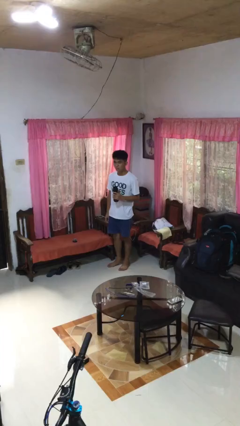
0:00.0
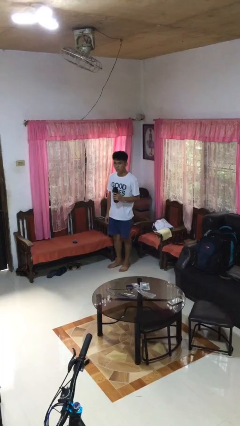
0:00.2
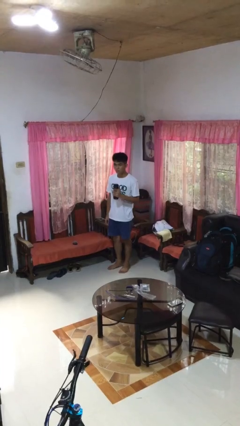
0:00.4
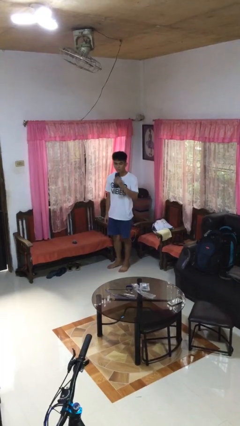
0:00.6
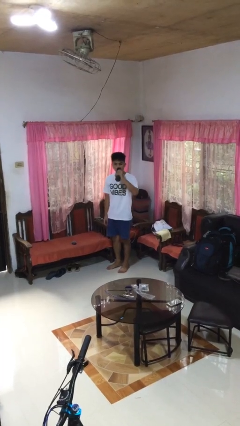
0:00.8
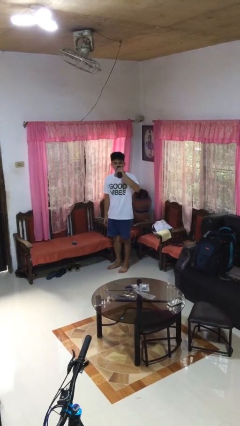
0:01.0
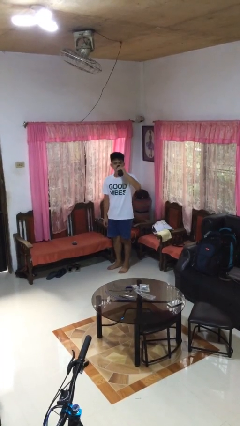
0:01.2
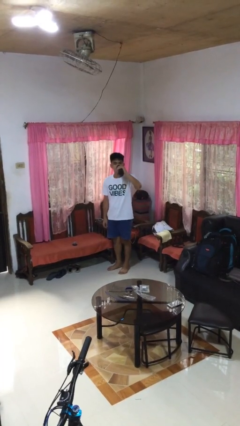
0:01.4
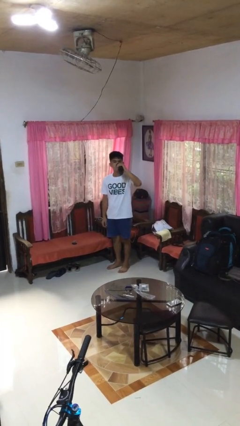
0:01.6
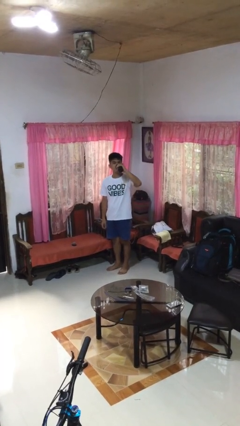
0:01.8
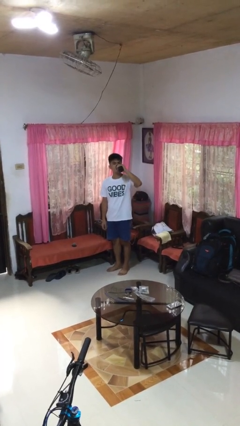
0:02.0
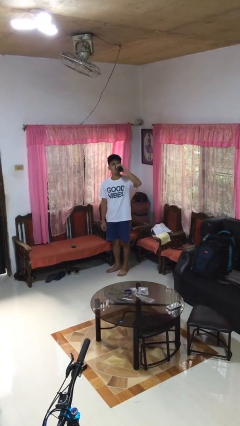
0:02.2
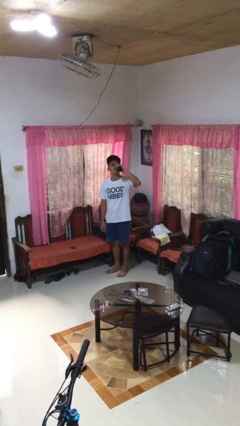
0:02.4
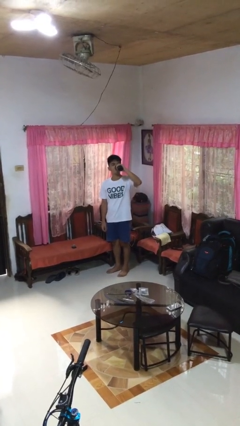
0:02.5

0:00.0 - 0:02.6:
person drinks from bottle

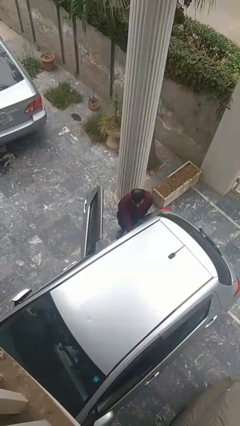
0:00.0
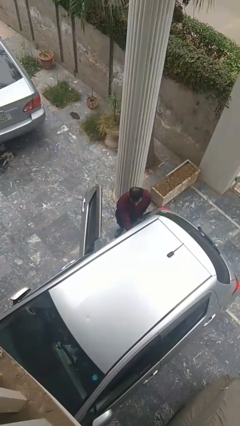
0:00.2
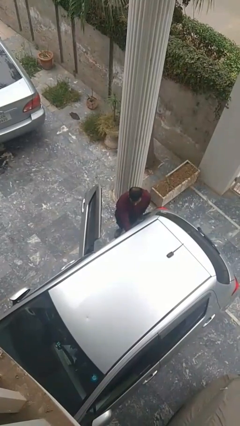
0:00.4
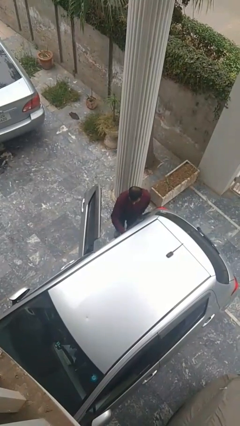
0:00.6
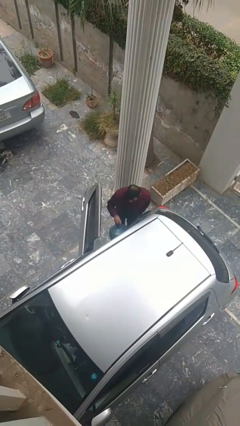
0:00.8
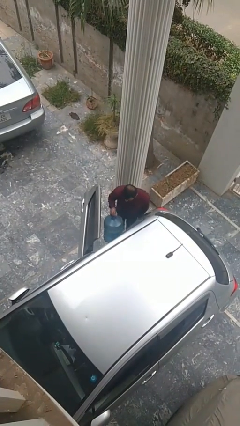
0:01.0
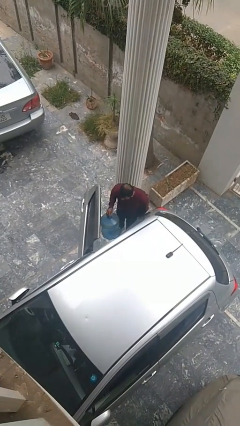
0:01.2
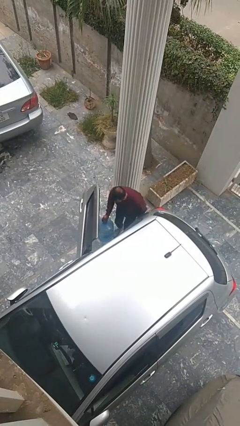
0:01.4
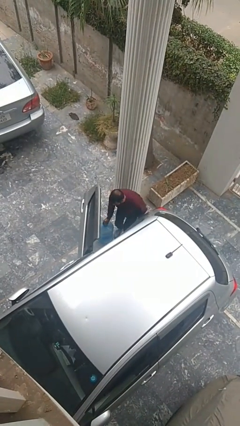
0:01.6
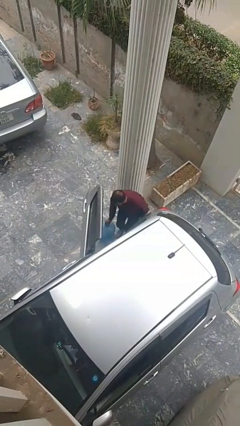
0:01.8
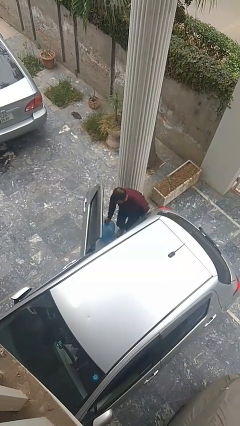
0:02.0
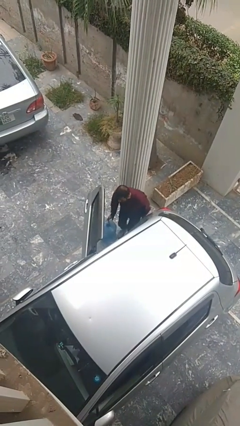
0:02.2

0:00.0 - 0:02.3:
person unloads car

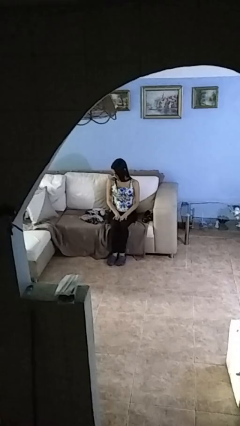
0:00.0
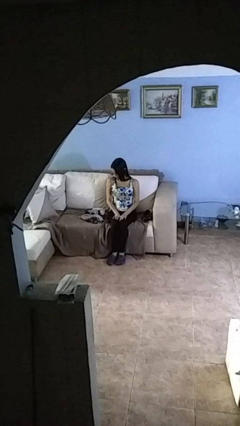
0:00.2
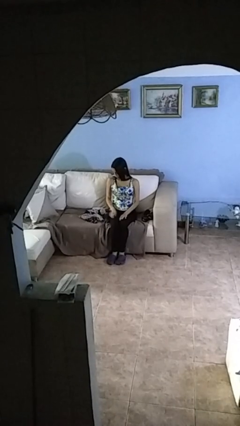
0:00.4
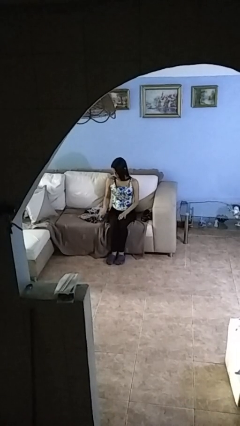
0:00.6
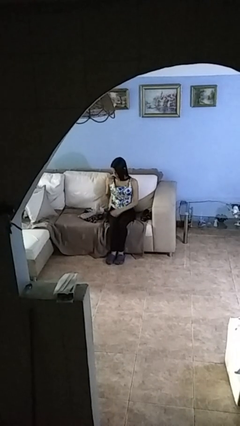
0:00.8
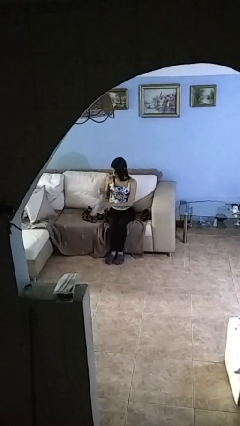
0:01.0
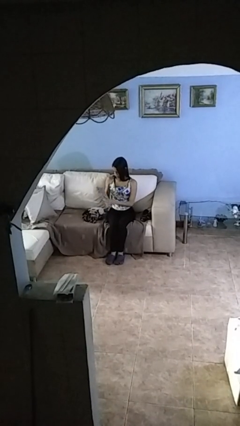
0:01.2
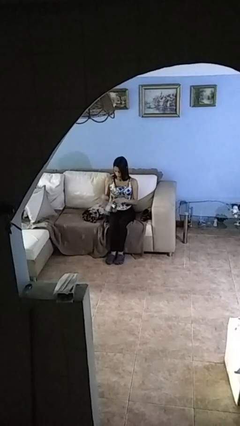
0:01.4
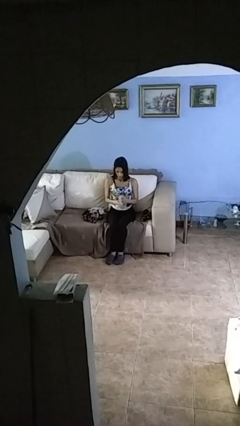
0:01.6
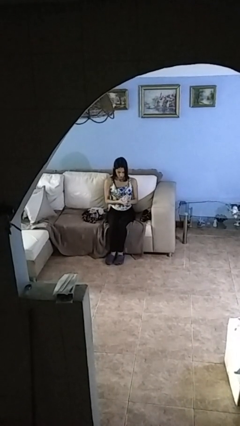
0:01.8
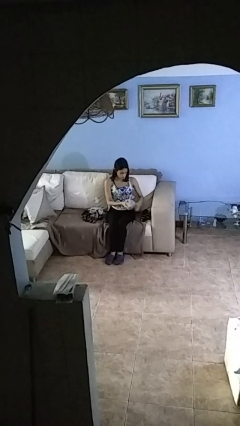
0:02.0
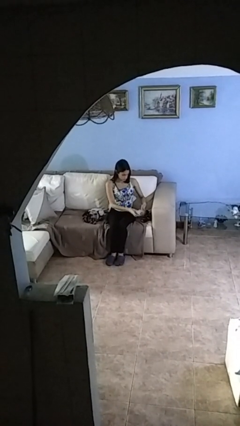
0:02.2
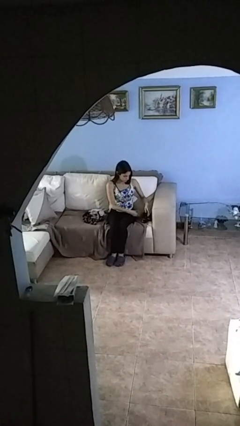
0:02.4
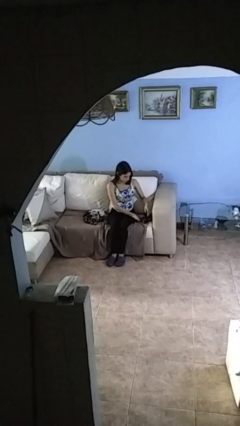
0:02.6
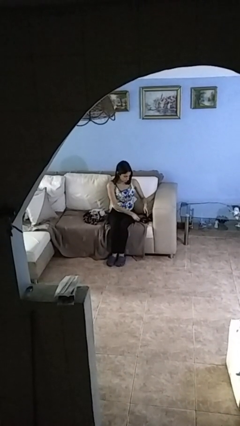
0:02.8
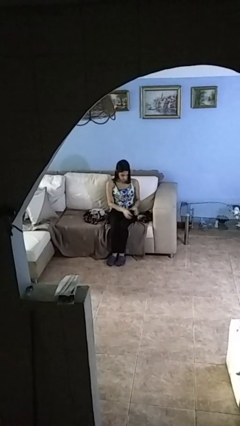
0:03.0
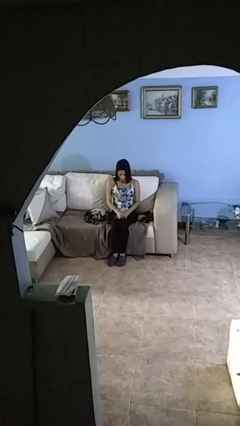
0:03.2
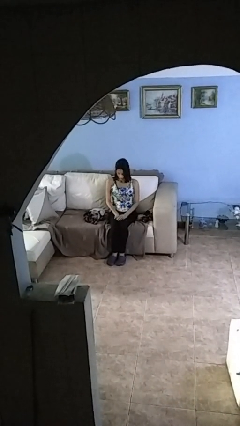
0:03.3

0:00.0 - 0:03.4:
person folds socks

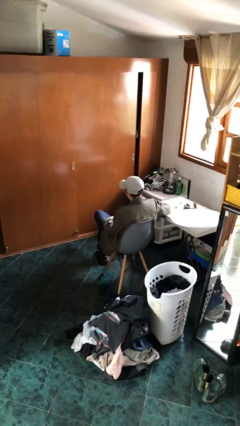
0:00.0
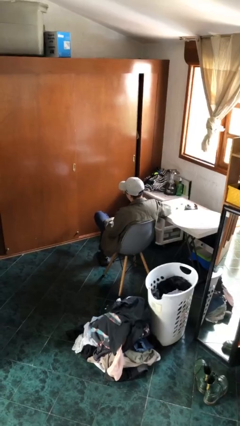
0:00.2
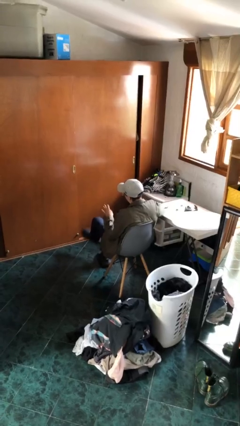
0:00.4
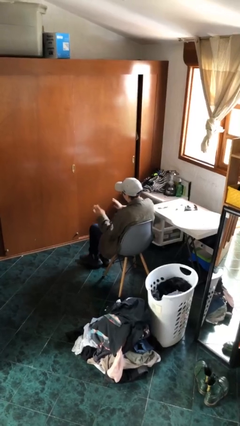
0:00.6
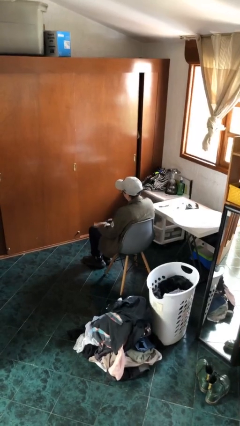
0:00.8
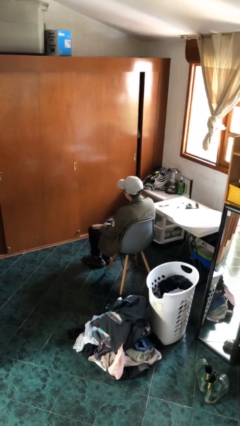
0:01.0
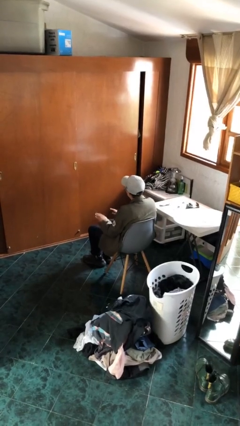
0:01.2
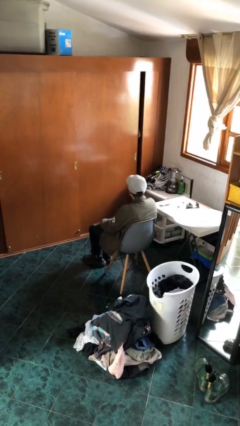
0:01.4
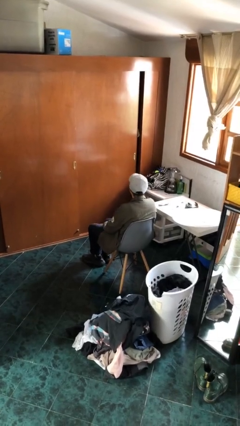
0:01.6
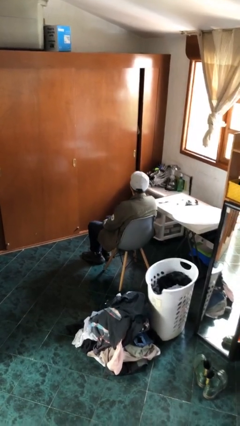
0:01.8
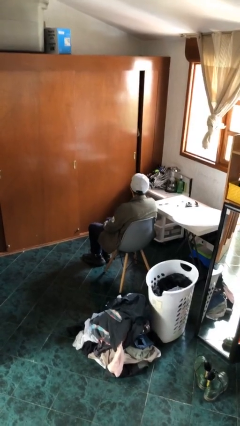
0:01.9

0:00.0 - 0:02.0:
person slaps hands on thighs

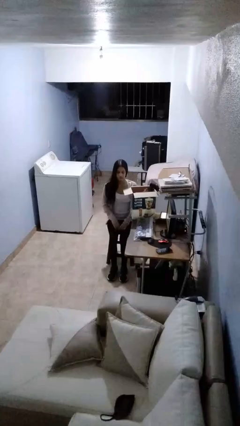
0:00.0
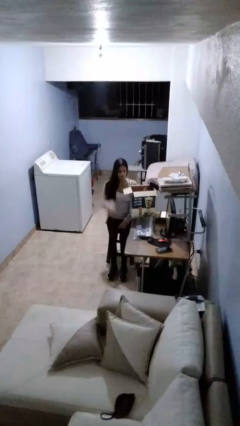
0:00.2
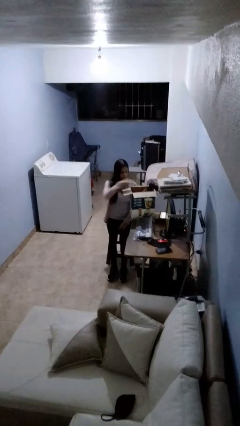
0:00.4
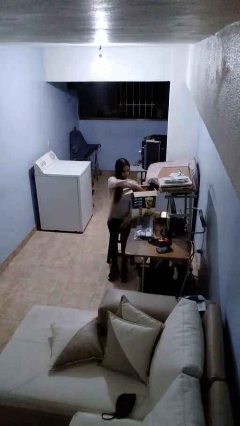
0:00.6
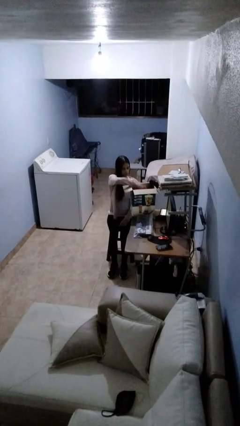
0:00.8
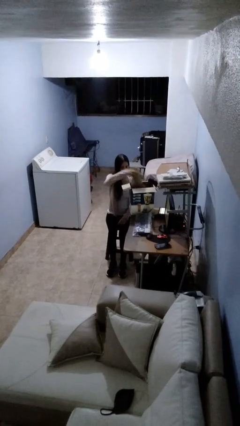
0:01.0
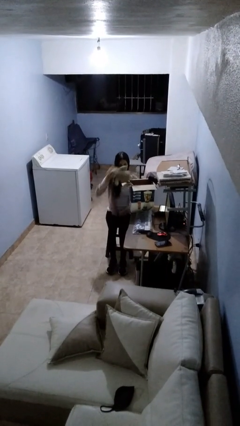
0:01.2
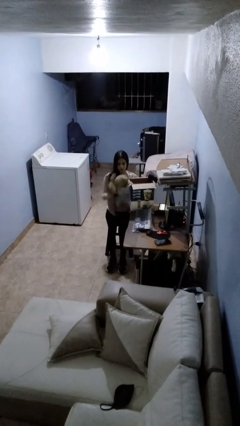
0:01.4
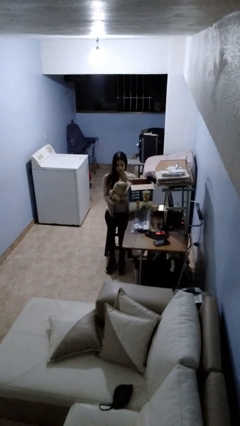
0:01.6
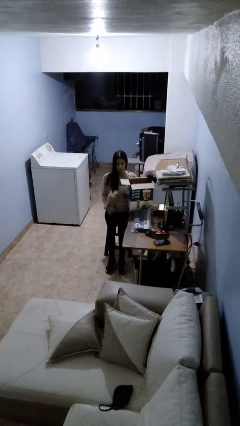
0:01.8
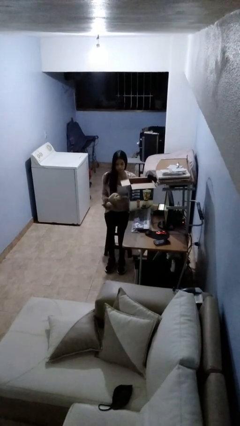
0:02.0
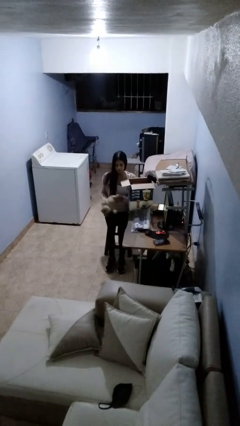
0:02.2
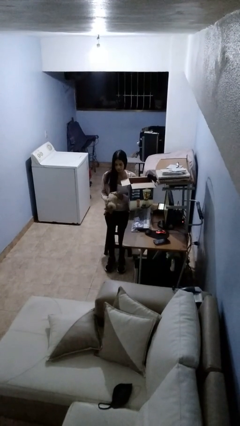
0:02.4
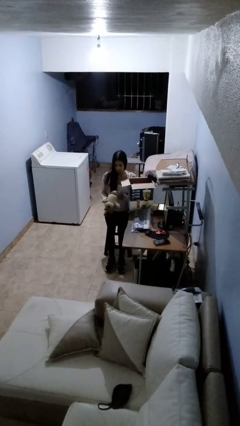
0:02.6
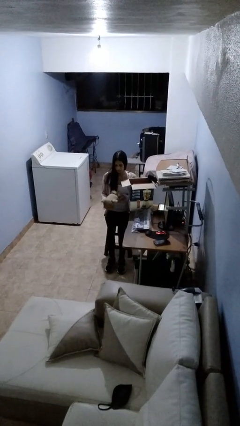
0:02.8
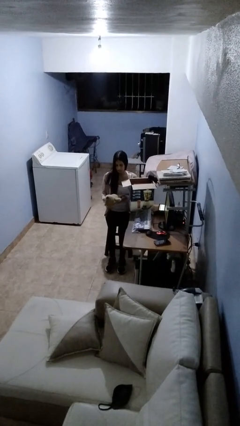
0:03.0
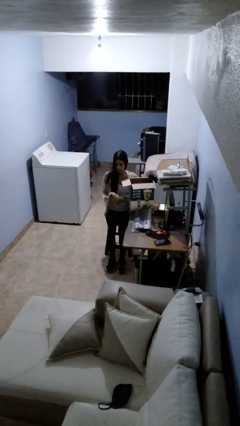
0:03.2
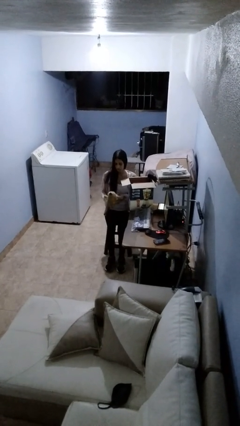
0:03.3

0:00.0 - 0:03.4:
person takes object from box

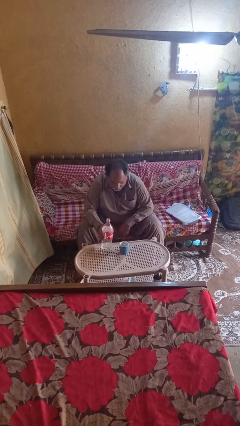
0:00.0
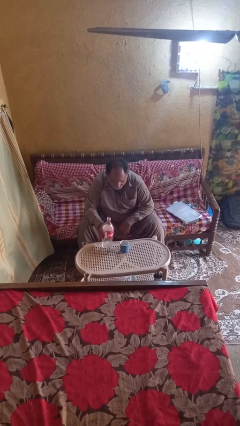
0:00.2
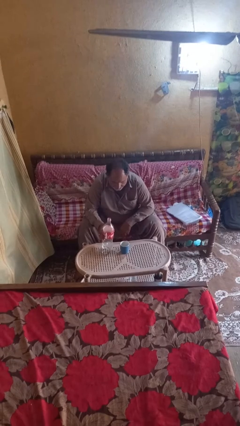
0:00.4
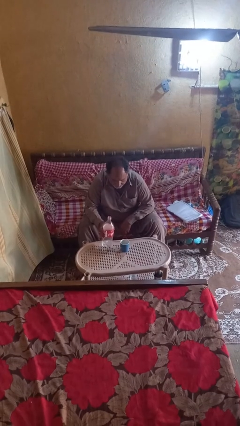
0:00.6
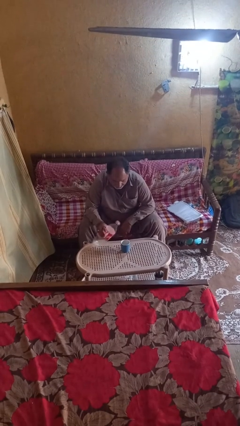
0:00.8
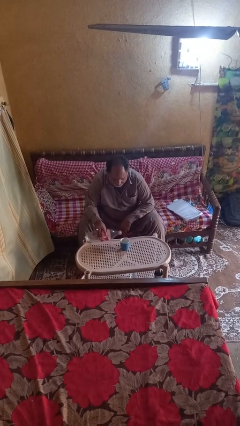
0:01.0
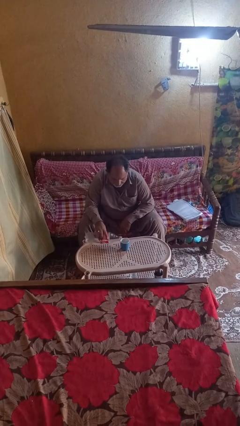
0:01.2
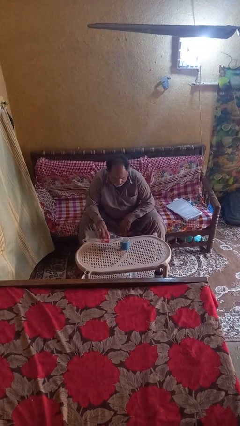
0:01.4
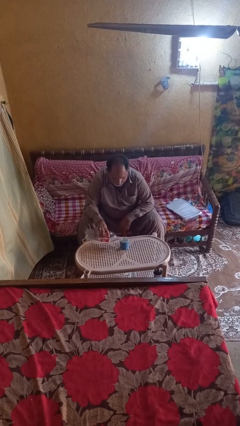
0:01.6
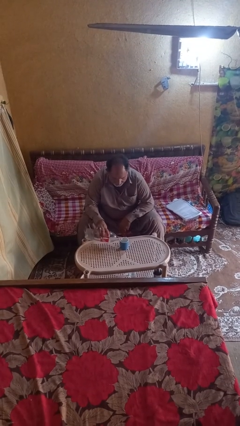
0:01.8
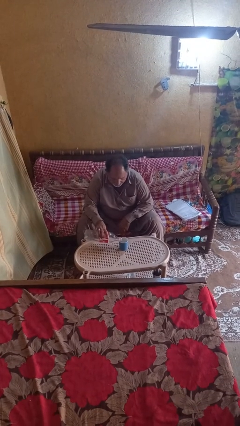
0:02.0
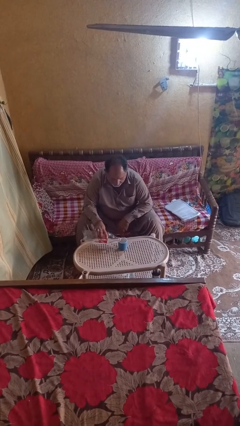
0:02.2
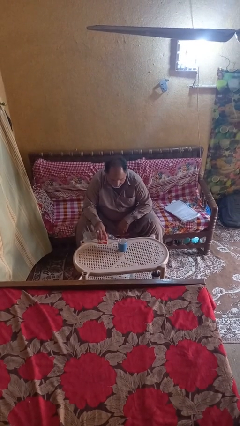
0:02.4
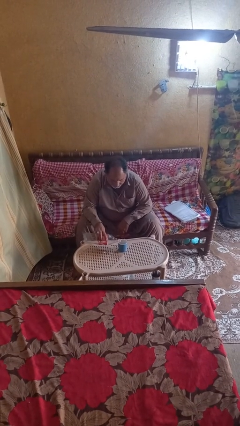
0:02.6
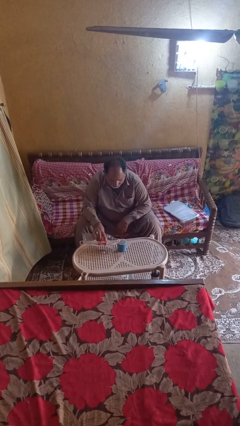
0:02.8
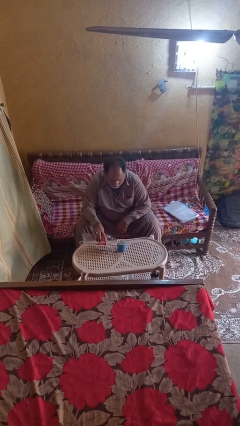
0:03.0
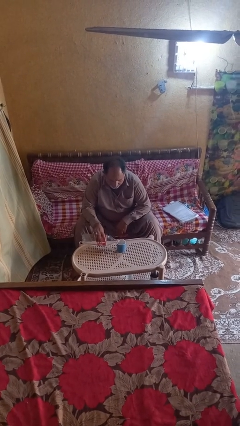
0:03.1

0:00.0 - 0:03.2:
person pours liquid into cup

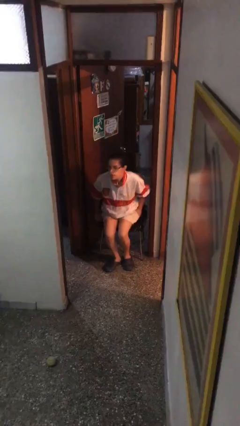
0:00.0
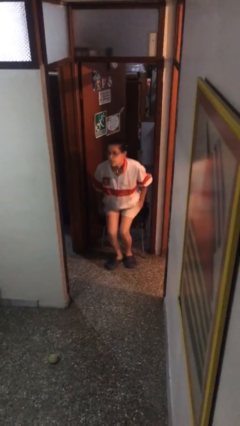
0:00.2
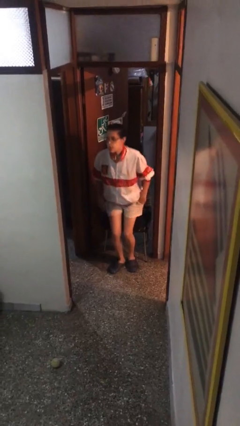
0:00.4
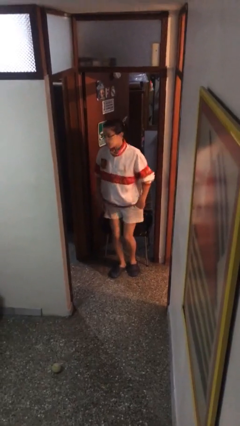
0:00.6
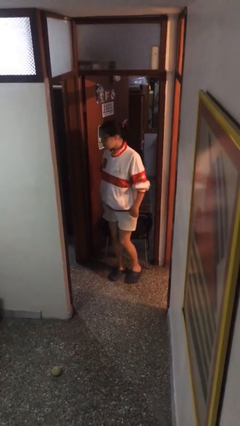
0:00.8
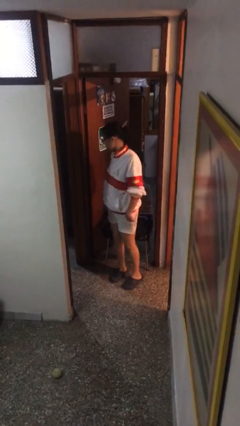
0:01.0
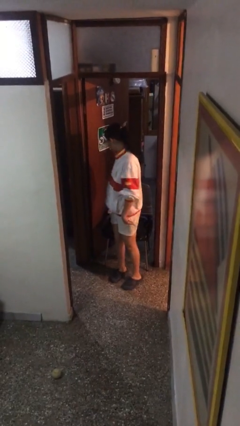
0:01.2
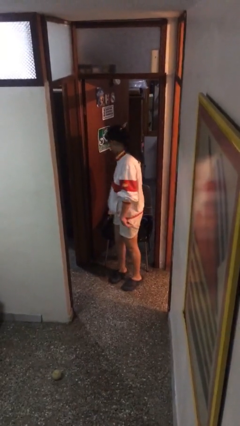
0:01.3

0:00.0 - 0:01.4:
person stands up
